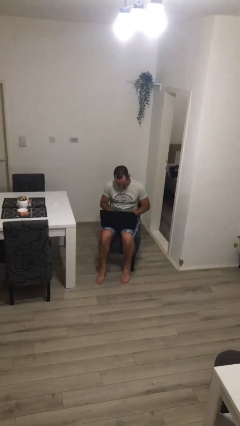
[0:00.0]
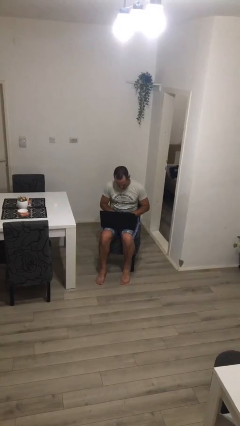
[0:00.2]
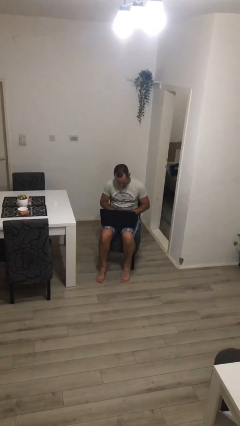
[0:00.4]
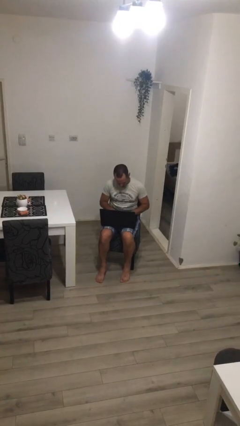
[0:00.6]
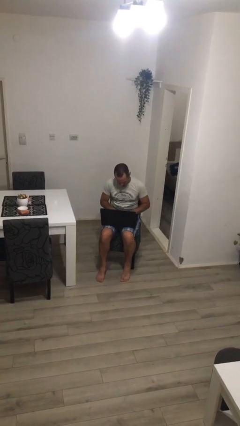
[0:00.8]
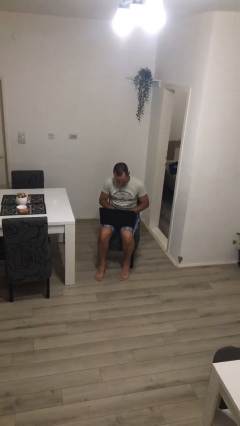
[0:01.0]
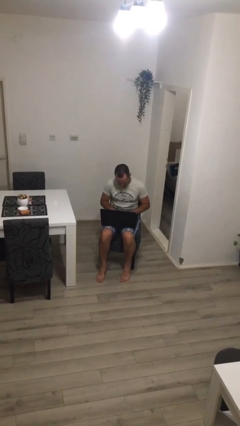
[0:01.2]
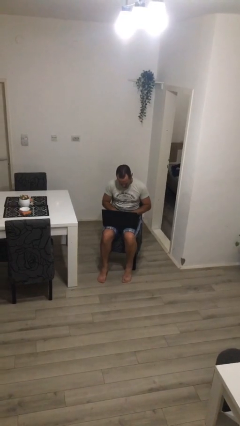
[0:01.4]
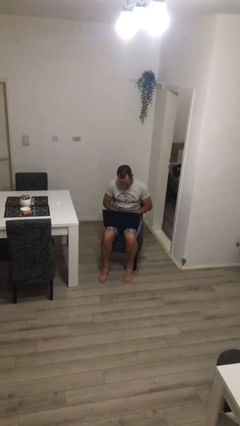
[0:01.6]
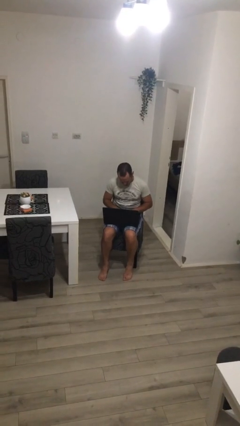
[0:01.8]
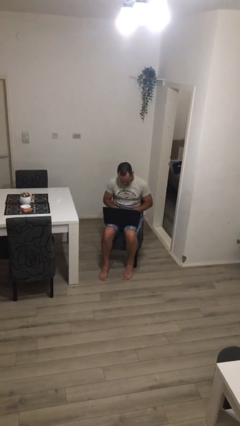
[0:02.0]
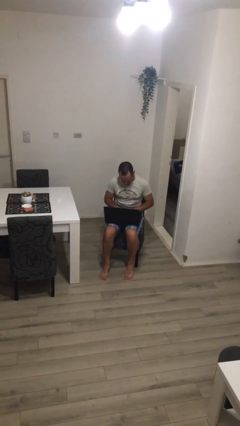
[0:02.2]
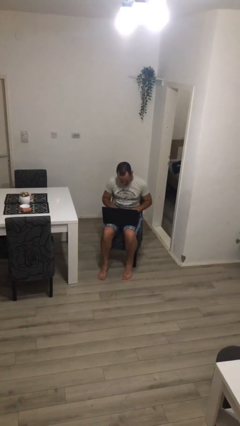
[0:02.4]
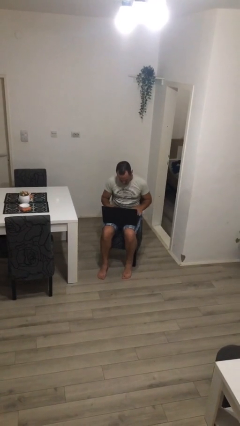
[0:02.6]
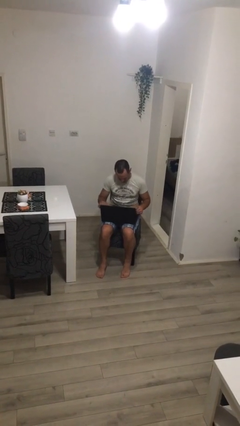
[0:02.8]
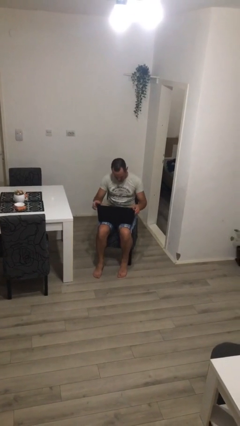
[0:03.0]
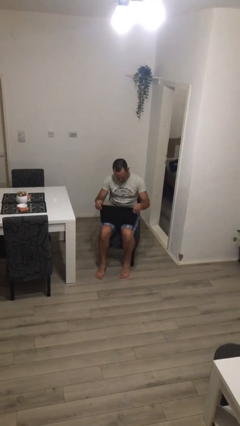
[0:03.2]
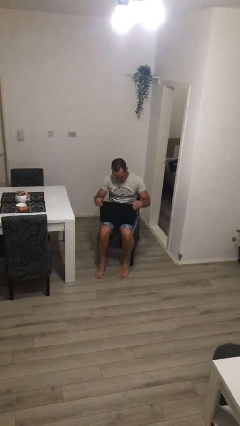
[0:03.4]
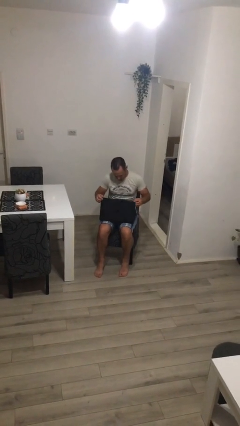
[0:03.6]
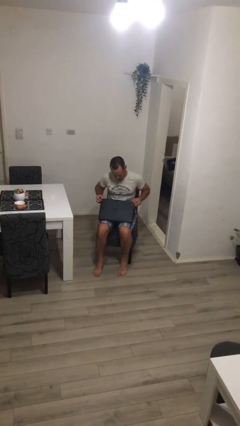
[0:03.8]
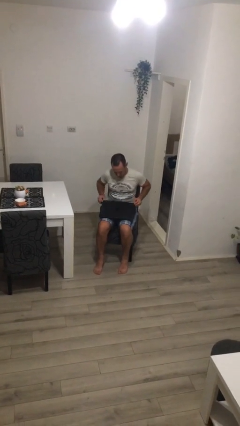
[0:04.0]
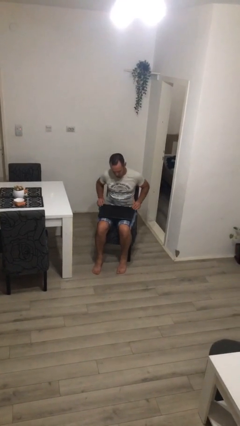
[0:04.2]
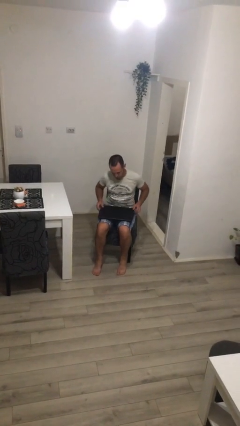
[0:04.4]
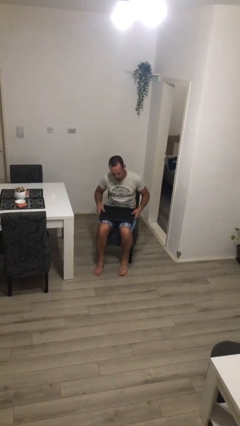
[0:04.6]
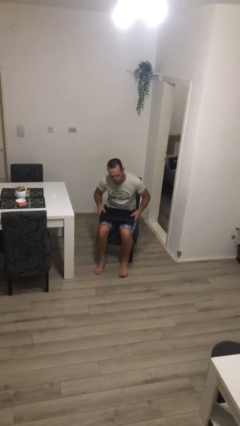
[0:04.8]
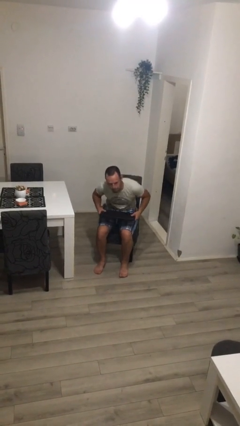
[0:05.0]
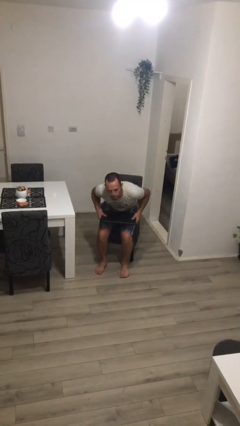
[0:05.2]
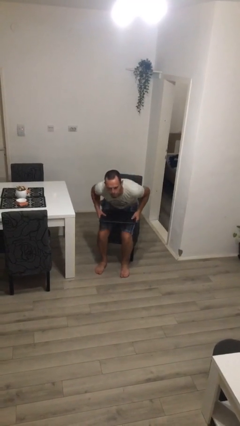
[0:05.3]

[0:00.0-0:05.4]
person interacts with laptop

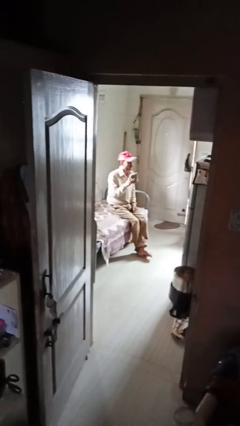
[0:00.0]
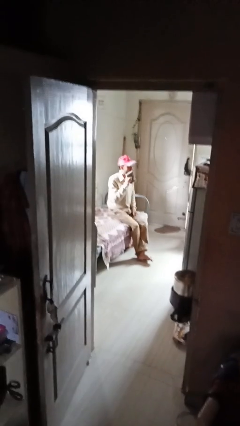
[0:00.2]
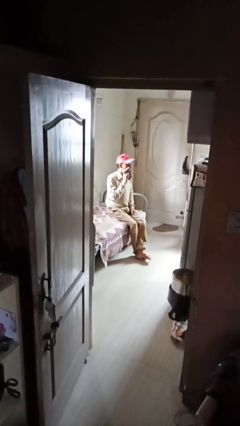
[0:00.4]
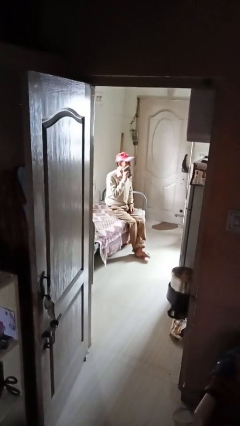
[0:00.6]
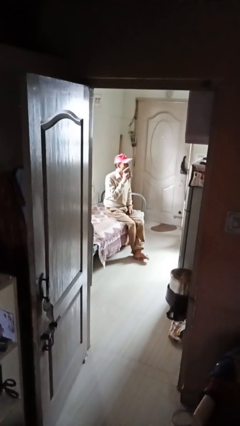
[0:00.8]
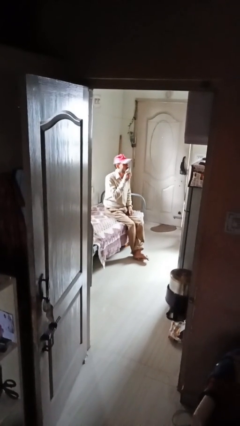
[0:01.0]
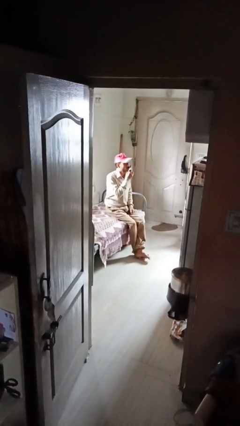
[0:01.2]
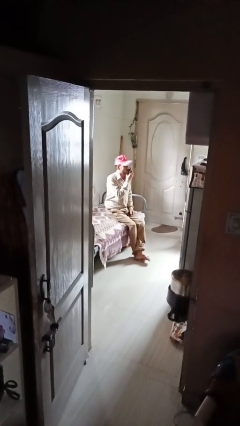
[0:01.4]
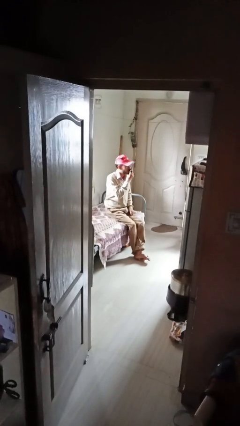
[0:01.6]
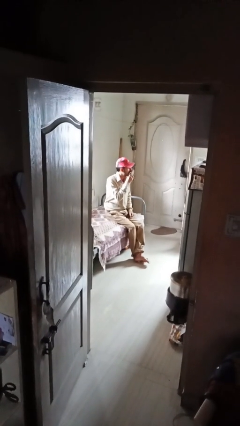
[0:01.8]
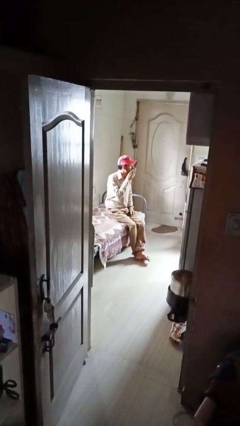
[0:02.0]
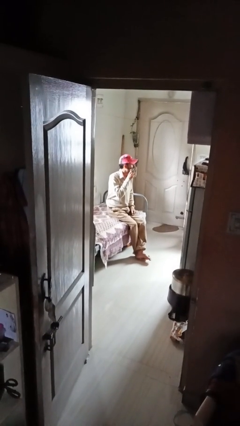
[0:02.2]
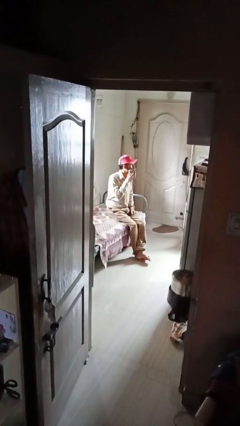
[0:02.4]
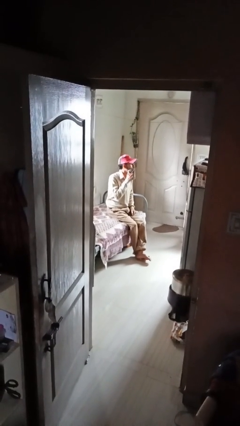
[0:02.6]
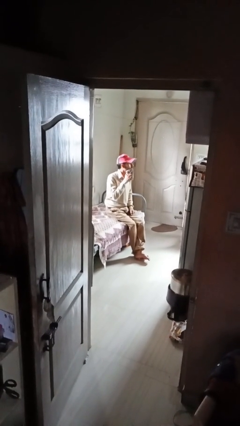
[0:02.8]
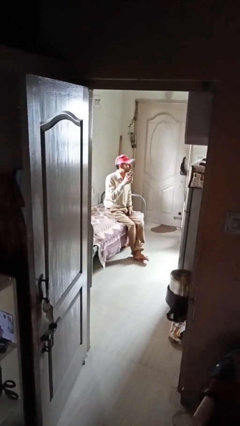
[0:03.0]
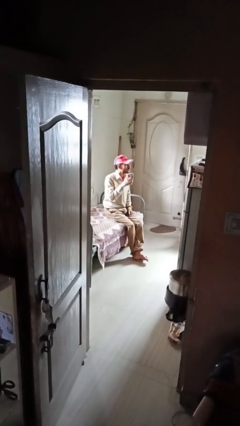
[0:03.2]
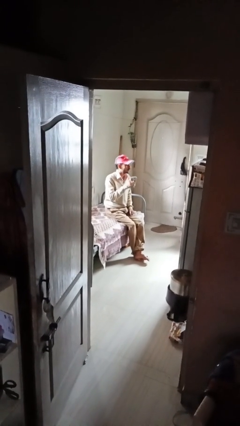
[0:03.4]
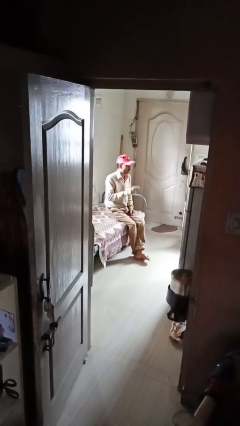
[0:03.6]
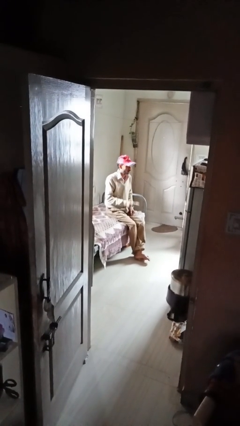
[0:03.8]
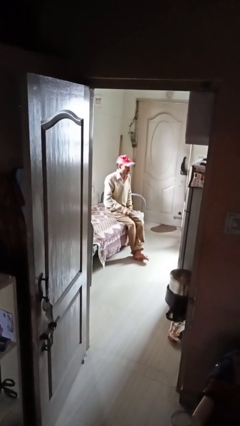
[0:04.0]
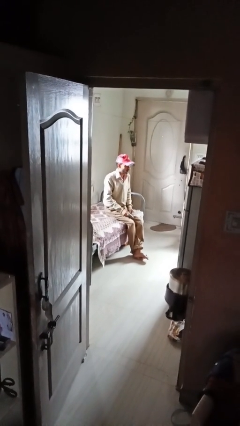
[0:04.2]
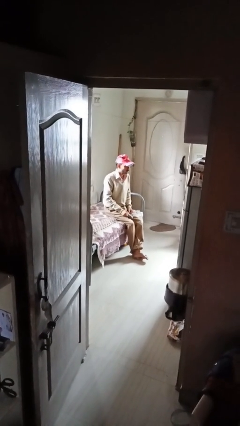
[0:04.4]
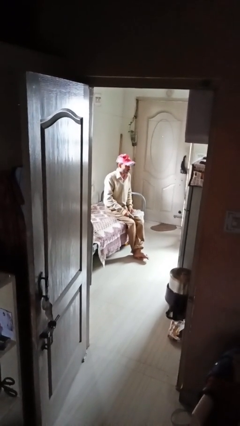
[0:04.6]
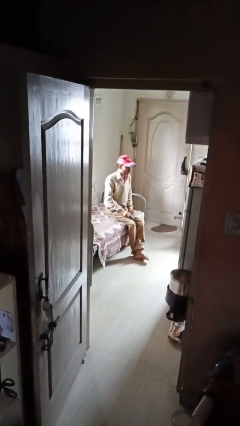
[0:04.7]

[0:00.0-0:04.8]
person wipes mouth with napkin

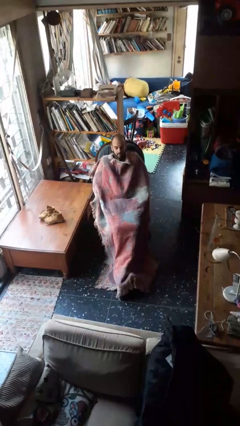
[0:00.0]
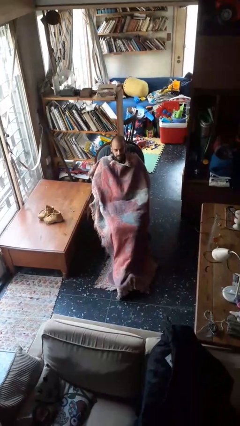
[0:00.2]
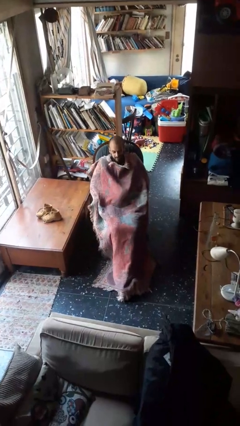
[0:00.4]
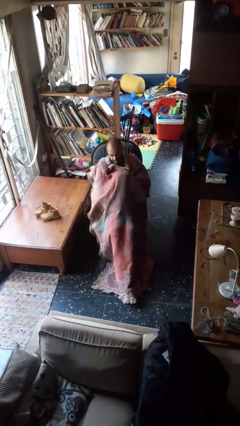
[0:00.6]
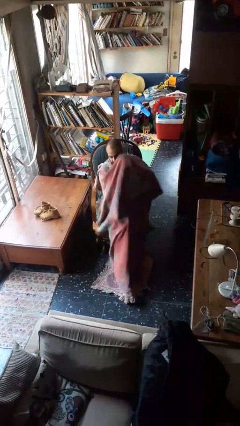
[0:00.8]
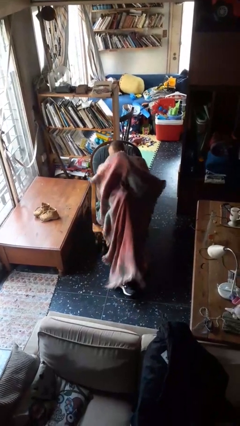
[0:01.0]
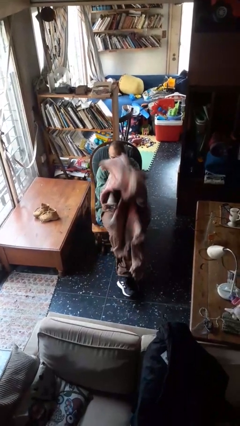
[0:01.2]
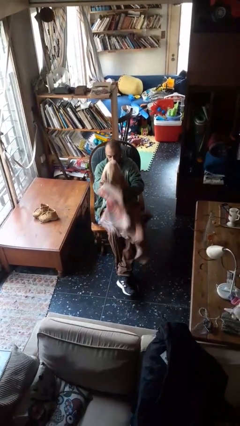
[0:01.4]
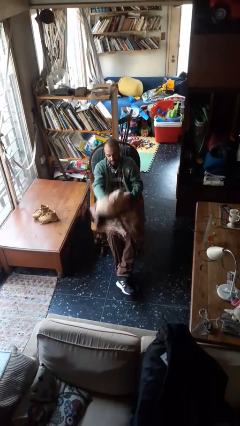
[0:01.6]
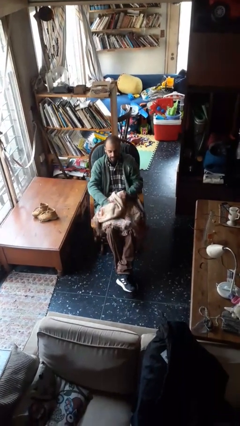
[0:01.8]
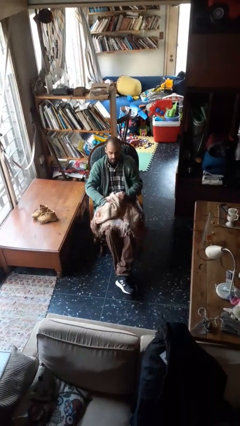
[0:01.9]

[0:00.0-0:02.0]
person uncovers with blanket

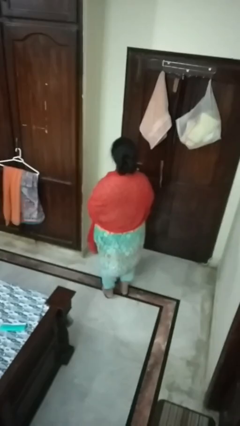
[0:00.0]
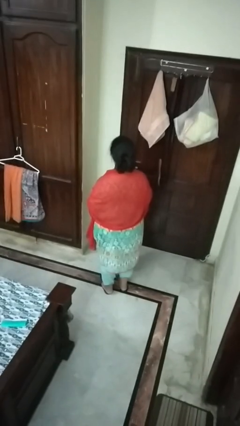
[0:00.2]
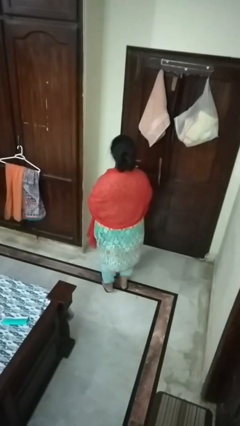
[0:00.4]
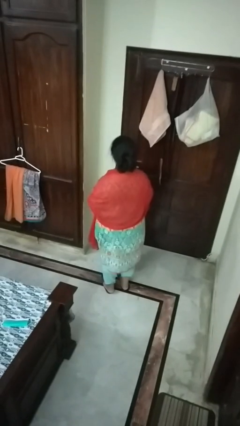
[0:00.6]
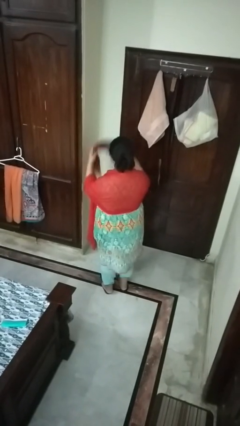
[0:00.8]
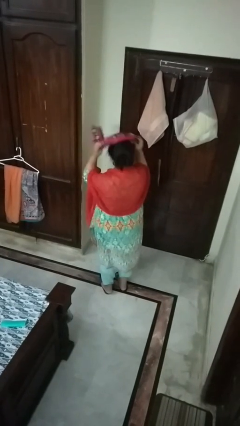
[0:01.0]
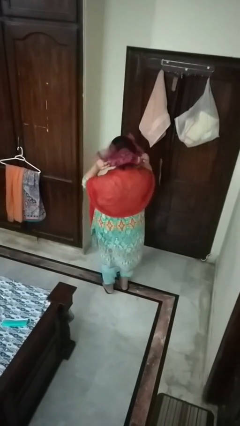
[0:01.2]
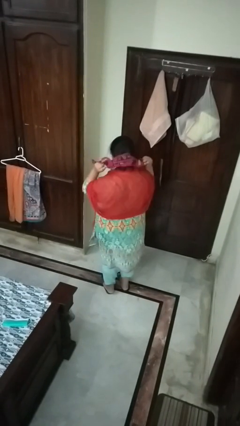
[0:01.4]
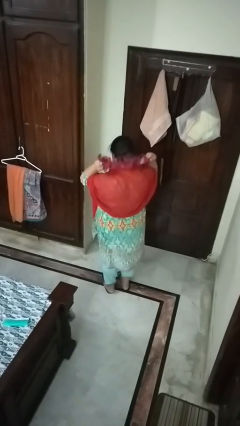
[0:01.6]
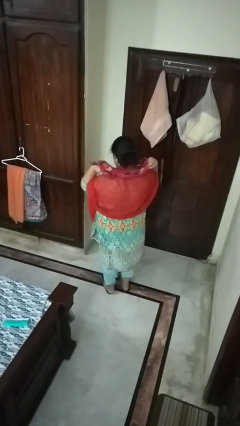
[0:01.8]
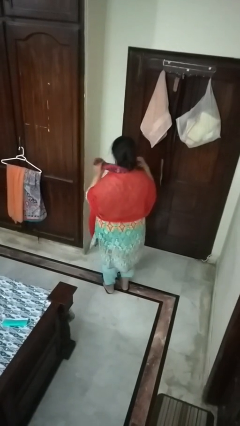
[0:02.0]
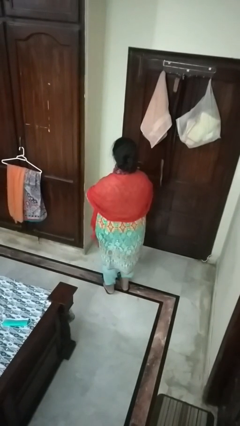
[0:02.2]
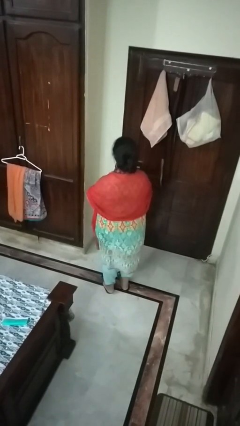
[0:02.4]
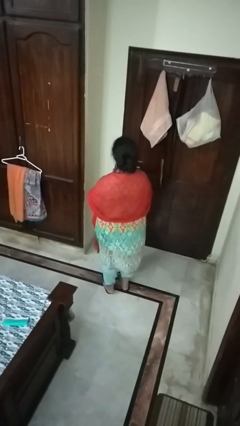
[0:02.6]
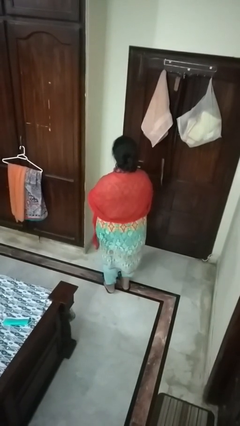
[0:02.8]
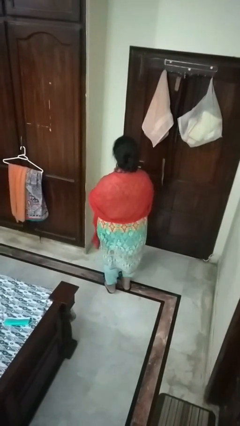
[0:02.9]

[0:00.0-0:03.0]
person puts on scarf

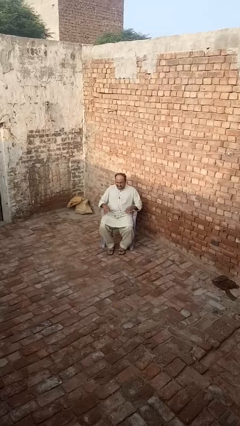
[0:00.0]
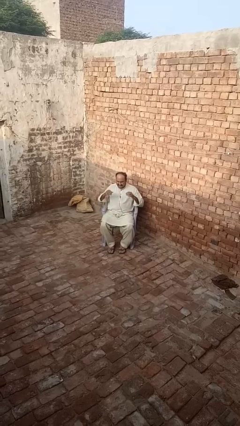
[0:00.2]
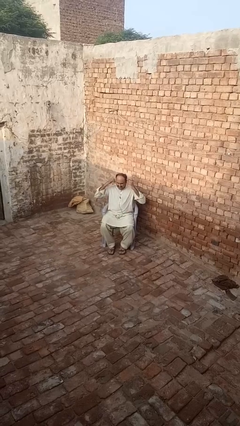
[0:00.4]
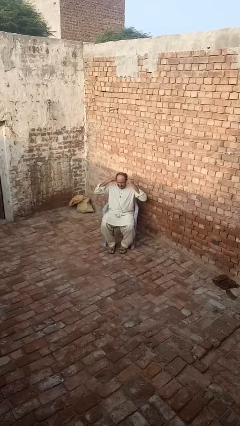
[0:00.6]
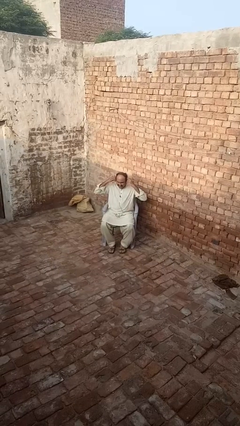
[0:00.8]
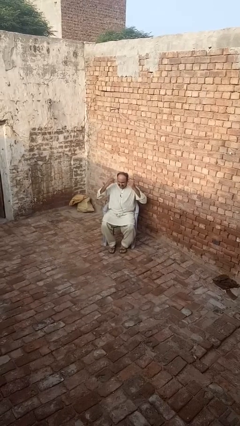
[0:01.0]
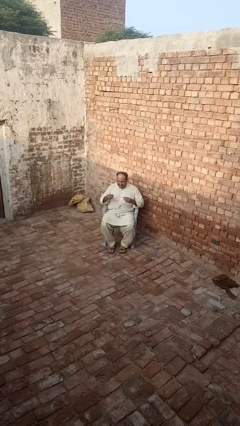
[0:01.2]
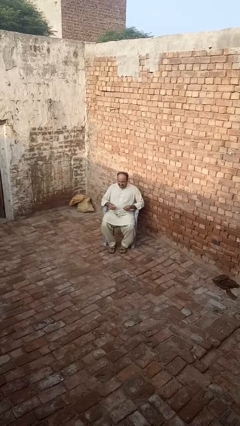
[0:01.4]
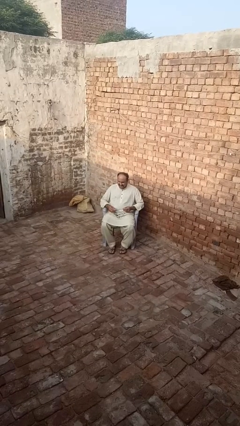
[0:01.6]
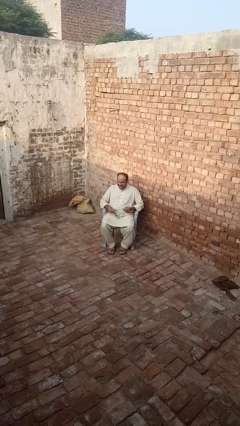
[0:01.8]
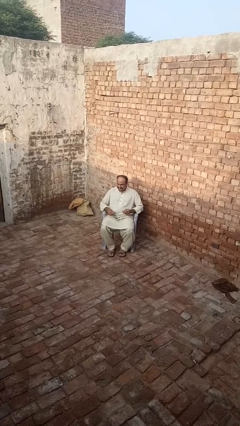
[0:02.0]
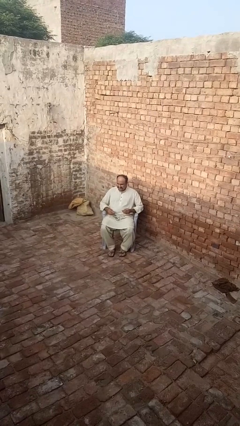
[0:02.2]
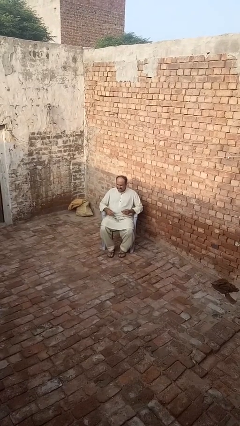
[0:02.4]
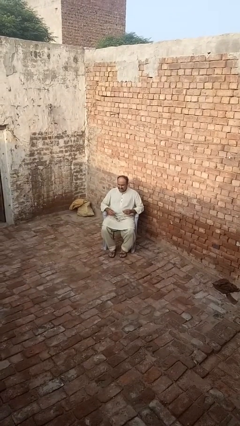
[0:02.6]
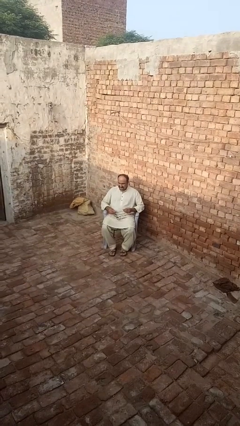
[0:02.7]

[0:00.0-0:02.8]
person takes off headphones
